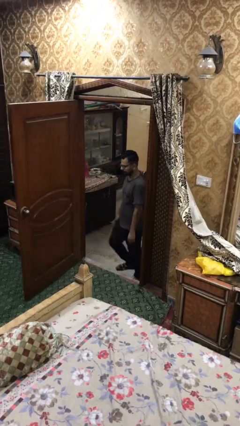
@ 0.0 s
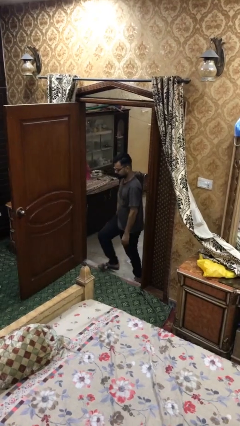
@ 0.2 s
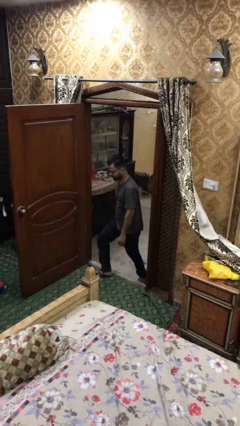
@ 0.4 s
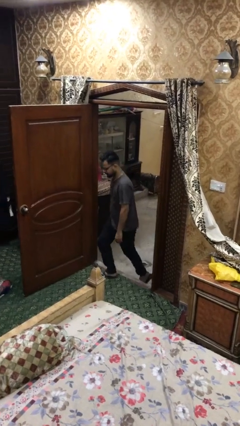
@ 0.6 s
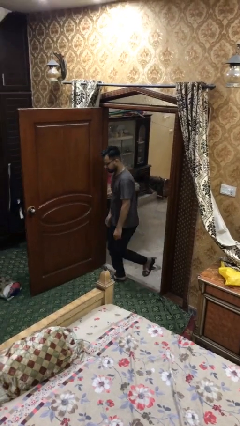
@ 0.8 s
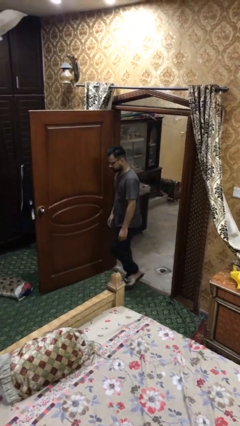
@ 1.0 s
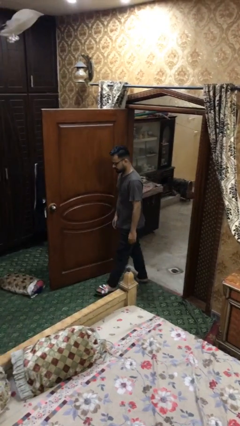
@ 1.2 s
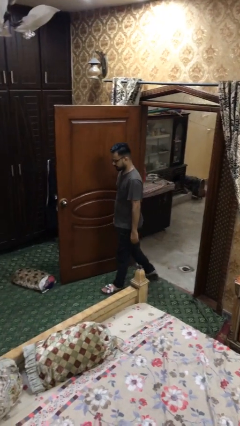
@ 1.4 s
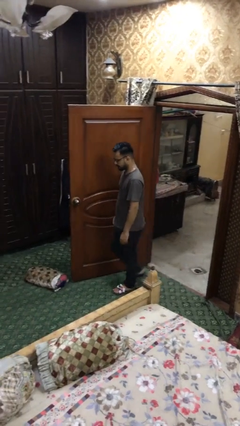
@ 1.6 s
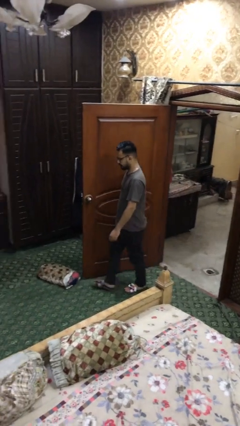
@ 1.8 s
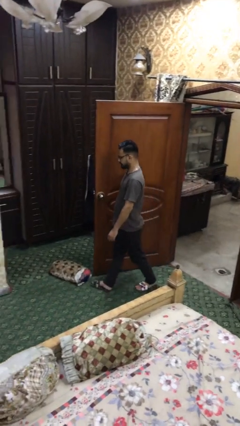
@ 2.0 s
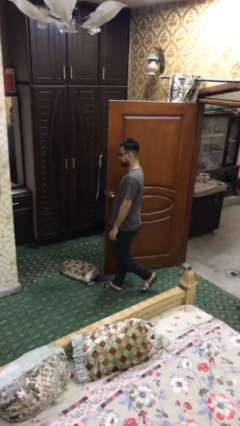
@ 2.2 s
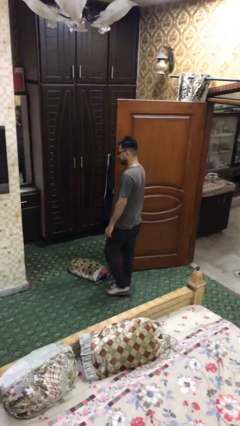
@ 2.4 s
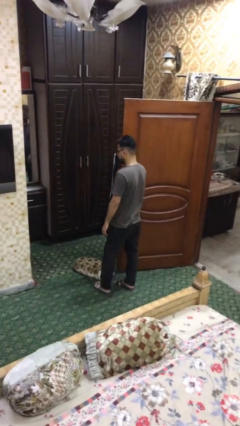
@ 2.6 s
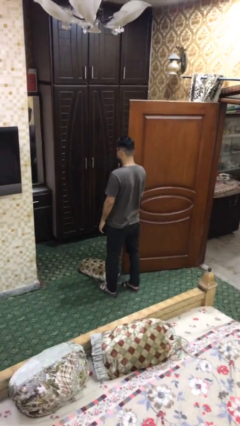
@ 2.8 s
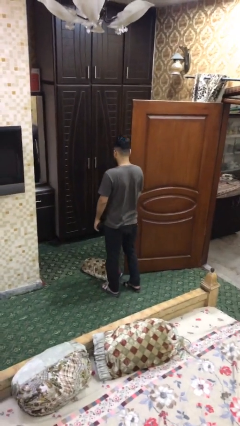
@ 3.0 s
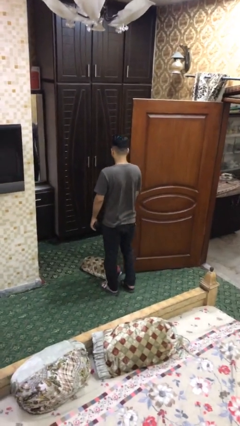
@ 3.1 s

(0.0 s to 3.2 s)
person enters scene through structure

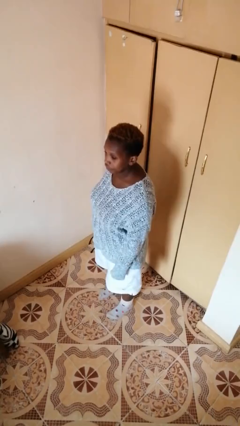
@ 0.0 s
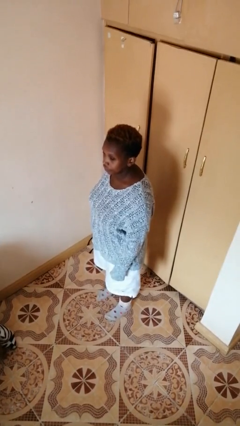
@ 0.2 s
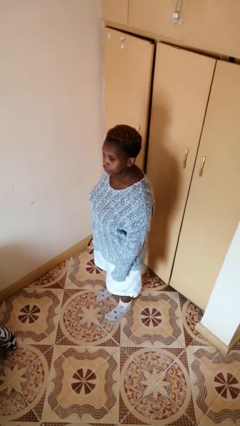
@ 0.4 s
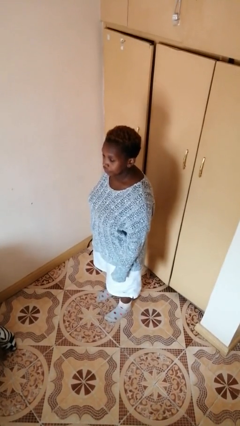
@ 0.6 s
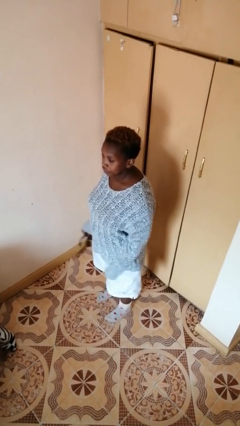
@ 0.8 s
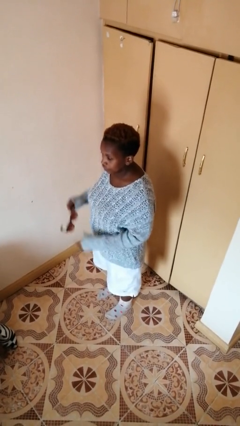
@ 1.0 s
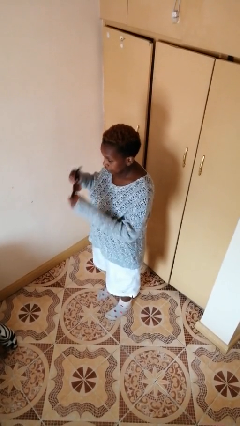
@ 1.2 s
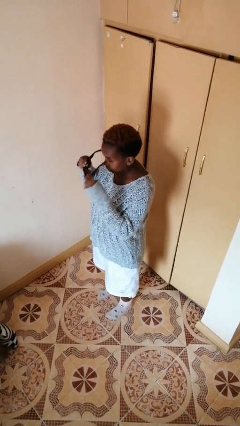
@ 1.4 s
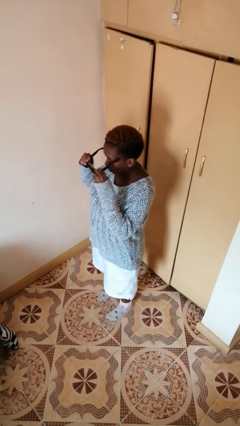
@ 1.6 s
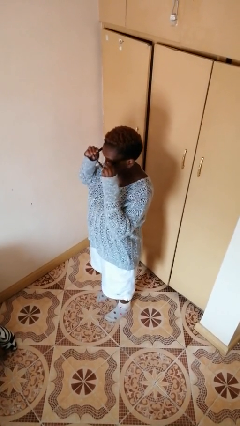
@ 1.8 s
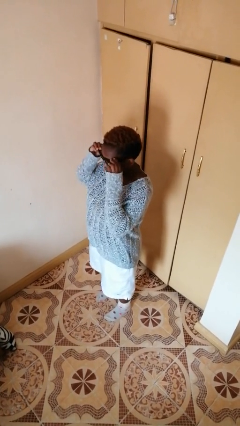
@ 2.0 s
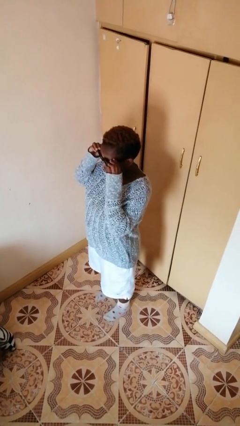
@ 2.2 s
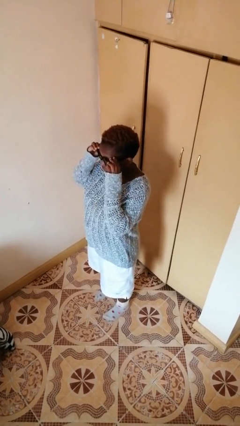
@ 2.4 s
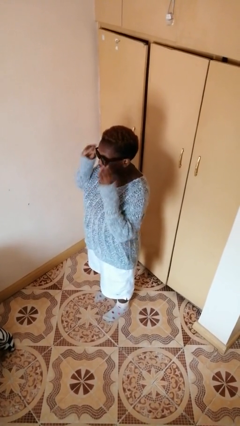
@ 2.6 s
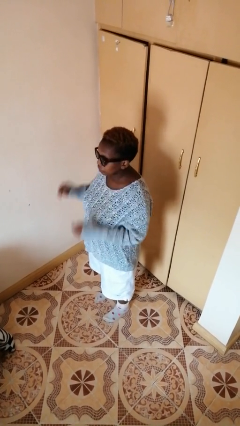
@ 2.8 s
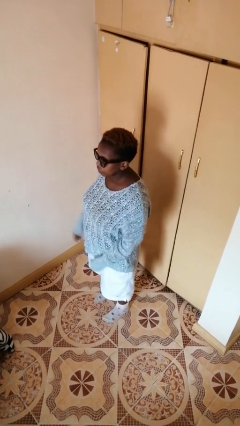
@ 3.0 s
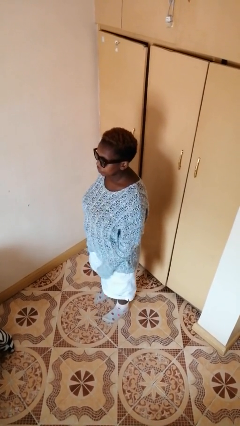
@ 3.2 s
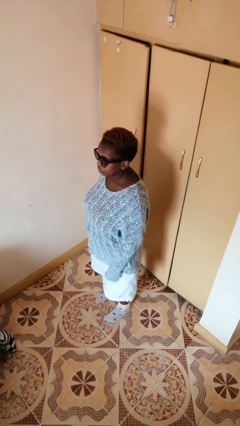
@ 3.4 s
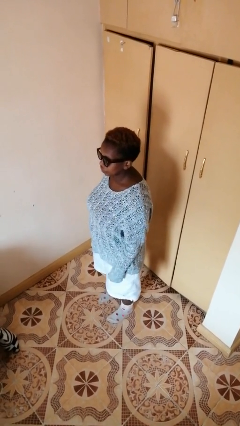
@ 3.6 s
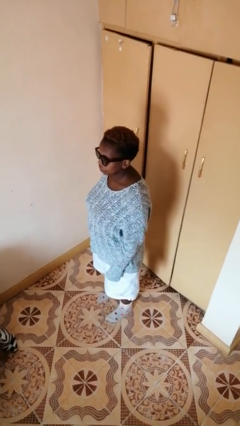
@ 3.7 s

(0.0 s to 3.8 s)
person puts on sunglasses

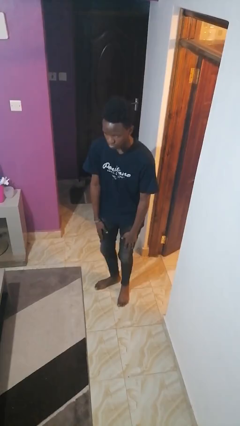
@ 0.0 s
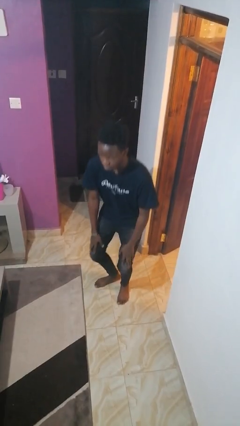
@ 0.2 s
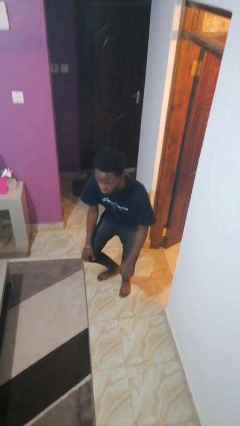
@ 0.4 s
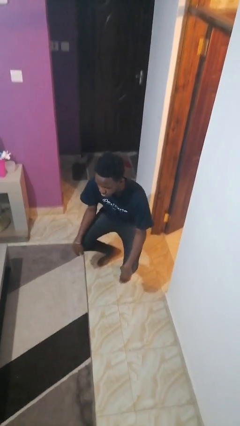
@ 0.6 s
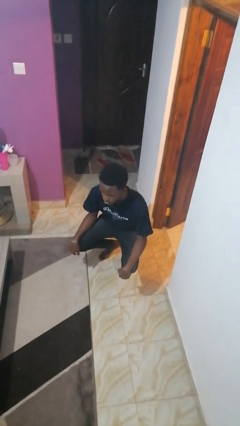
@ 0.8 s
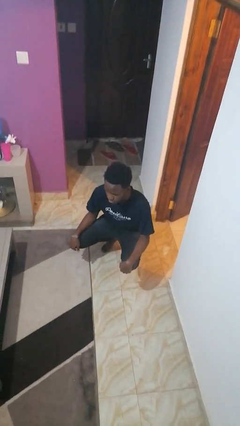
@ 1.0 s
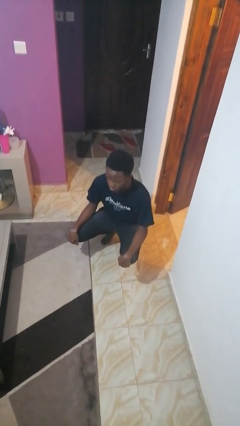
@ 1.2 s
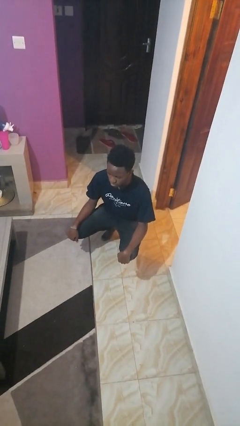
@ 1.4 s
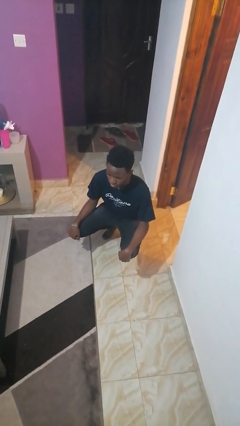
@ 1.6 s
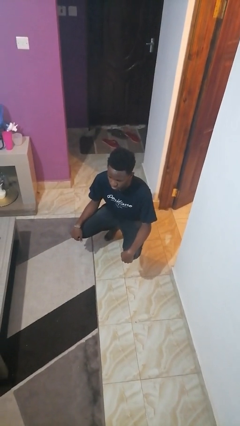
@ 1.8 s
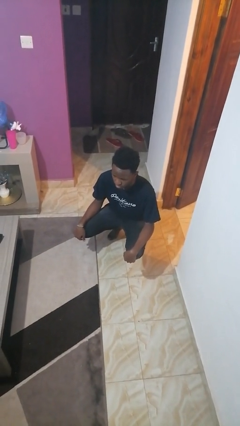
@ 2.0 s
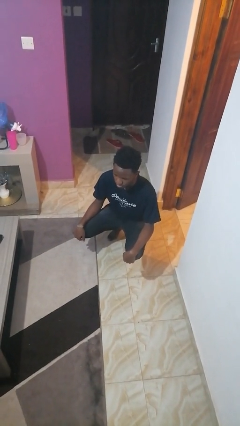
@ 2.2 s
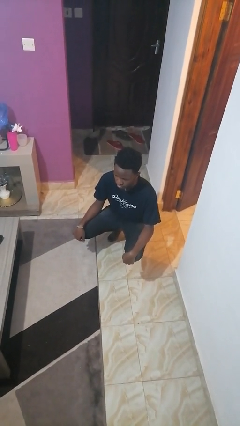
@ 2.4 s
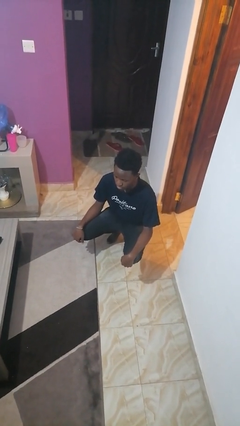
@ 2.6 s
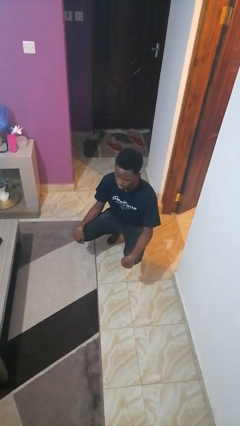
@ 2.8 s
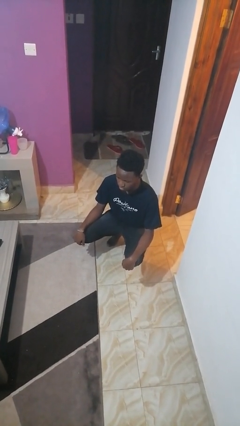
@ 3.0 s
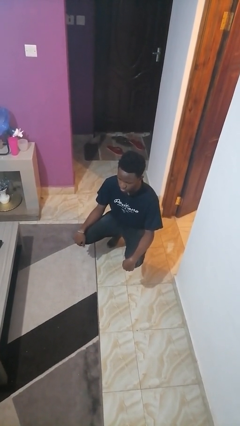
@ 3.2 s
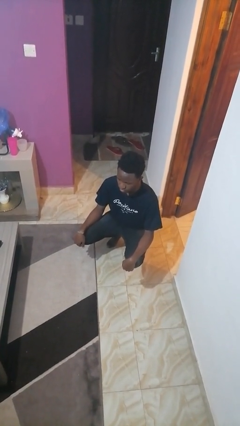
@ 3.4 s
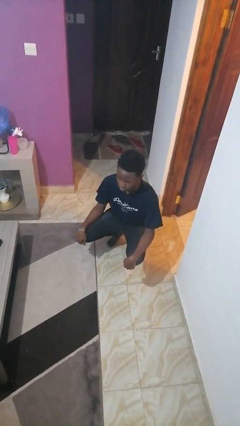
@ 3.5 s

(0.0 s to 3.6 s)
person squats

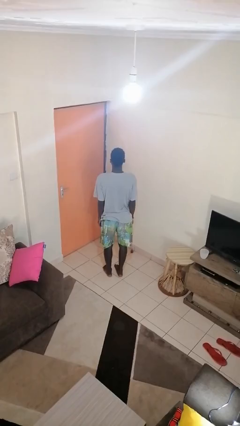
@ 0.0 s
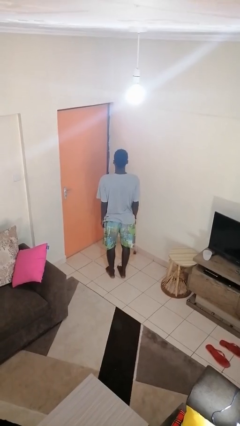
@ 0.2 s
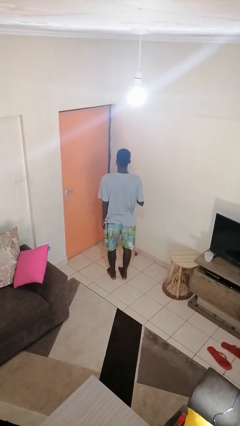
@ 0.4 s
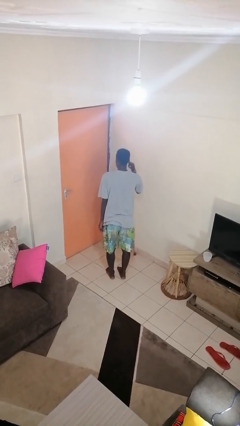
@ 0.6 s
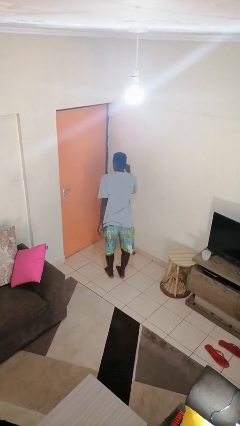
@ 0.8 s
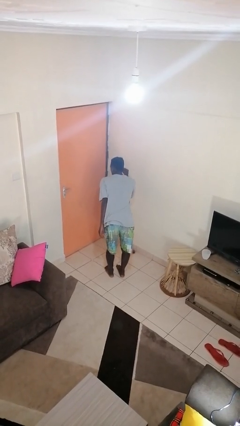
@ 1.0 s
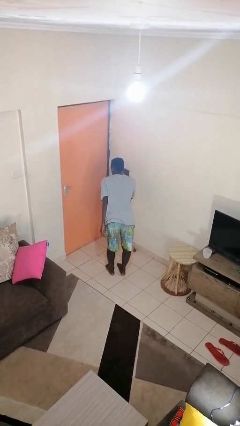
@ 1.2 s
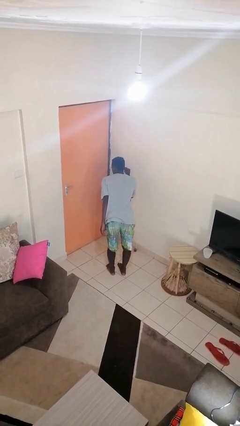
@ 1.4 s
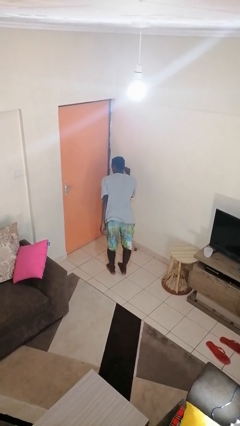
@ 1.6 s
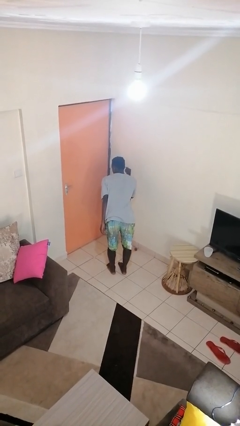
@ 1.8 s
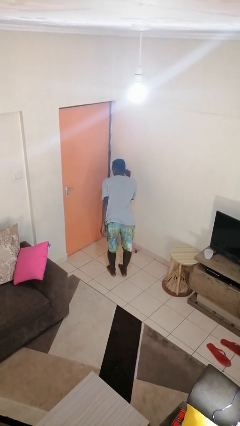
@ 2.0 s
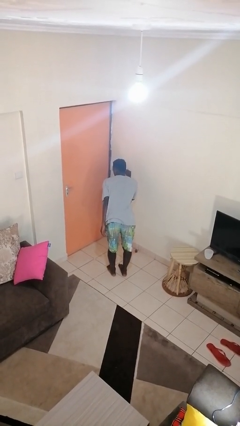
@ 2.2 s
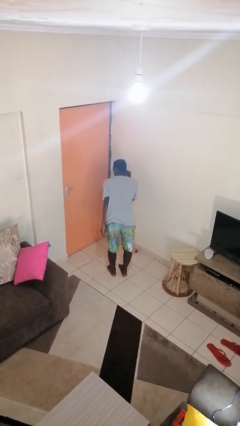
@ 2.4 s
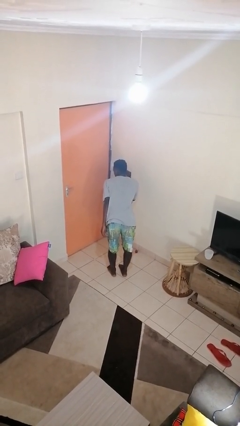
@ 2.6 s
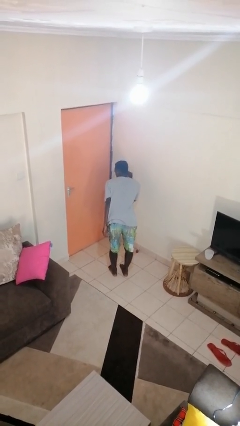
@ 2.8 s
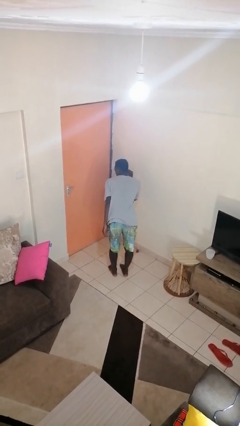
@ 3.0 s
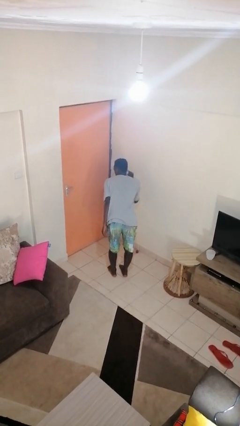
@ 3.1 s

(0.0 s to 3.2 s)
person gestures listen closely

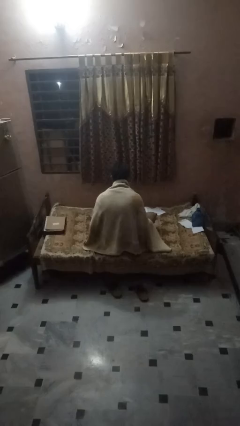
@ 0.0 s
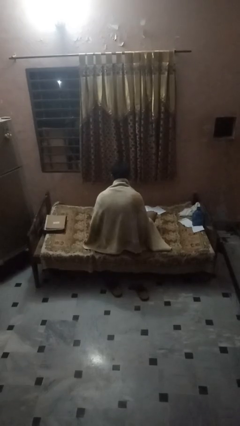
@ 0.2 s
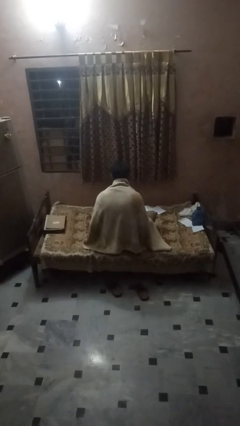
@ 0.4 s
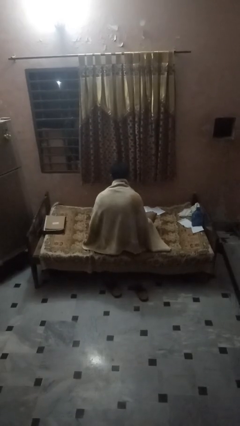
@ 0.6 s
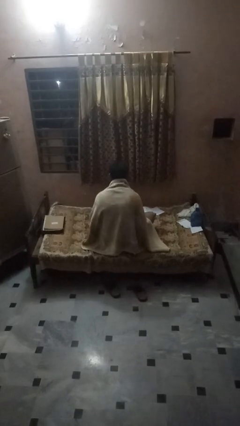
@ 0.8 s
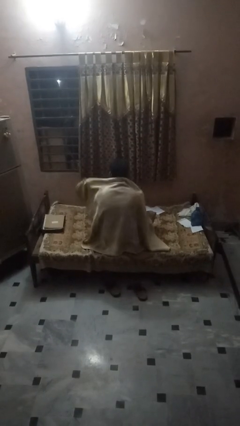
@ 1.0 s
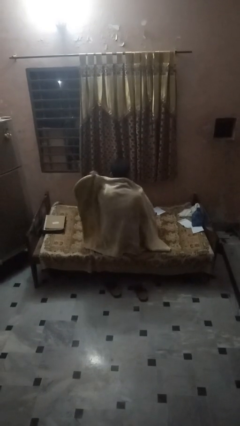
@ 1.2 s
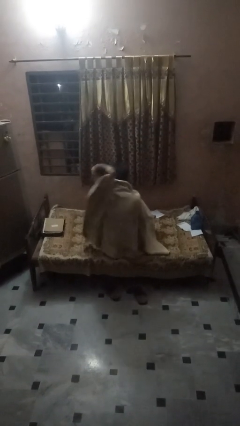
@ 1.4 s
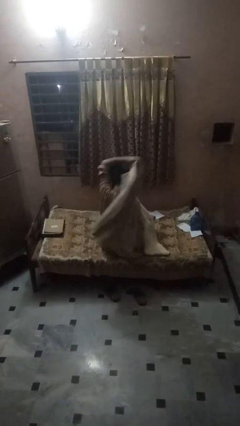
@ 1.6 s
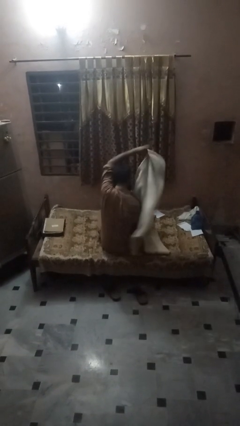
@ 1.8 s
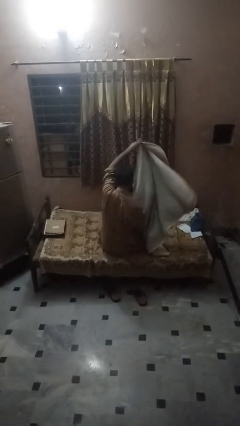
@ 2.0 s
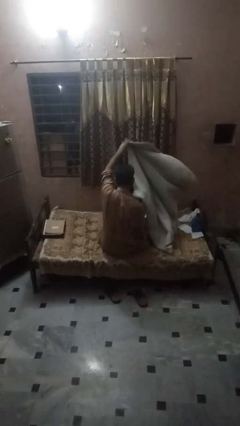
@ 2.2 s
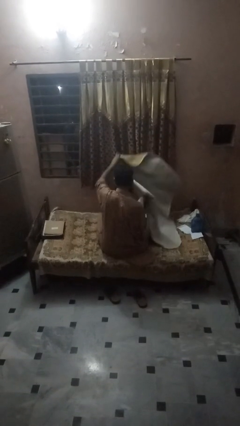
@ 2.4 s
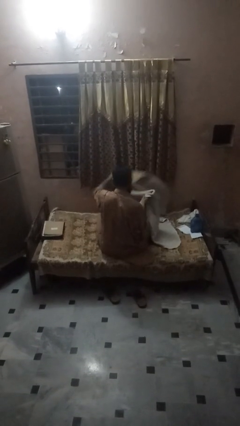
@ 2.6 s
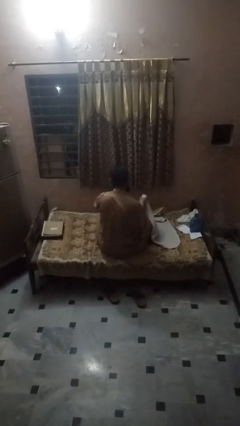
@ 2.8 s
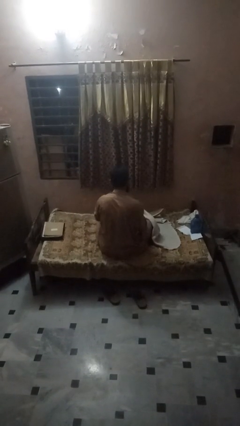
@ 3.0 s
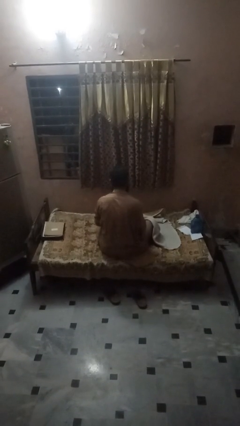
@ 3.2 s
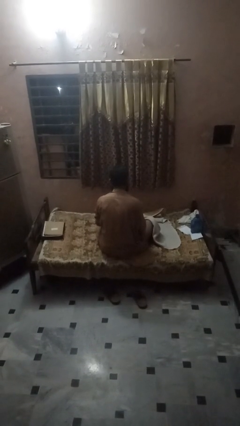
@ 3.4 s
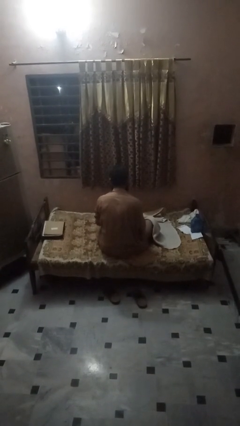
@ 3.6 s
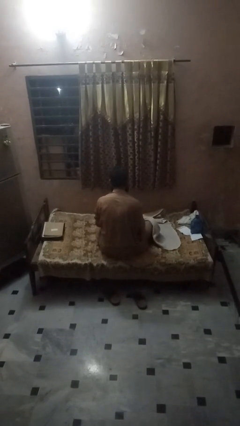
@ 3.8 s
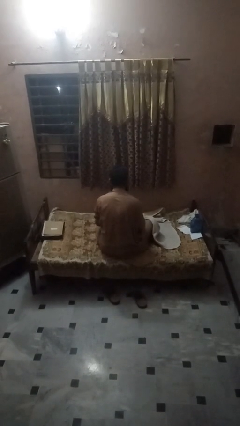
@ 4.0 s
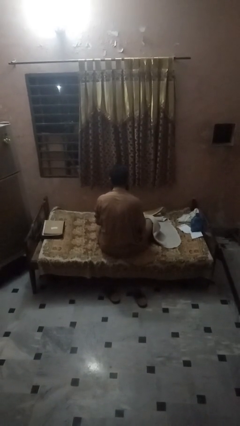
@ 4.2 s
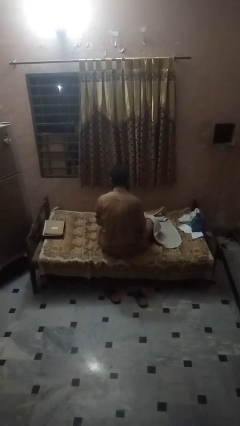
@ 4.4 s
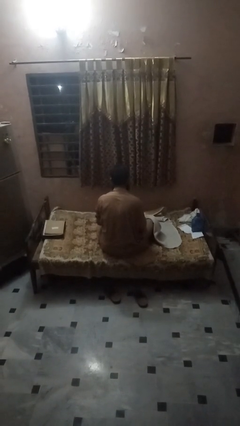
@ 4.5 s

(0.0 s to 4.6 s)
person uncovers with blanket
